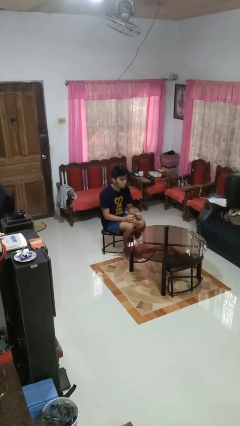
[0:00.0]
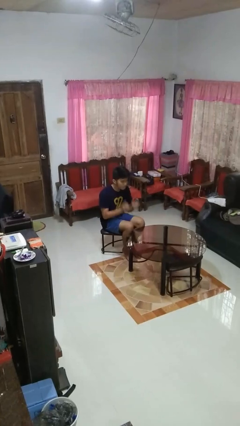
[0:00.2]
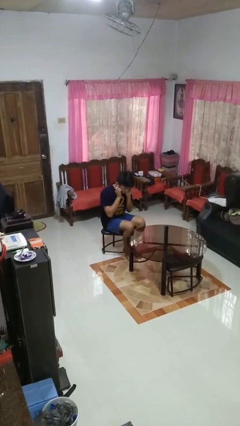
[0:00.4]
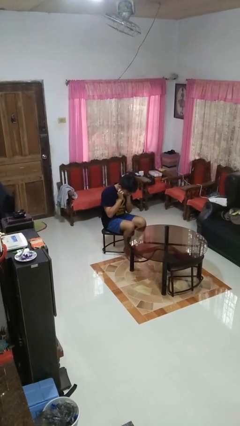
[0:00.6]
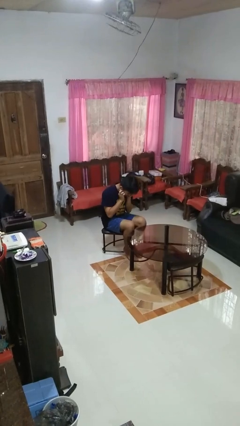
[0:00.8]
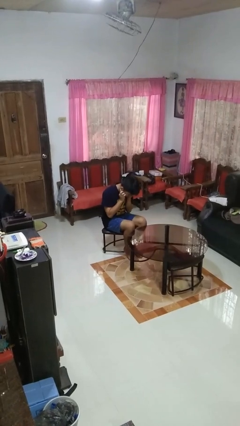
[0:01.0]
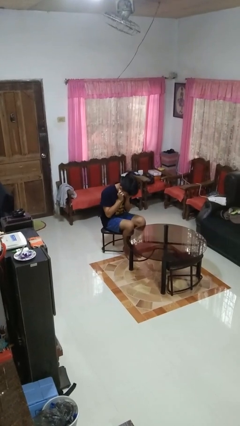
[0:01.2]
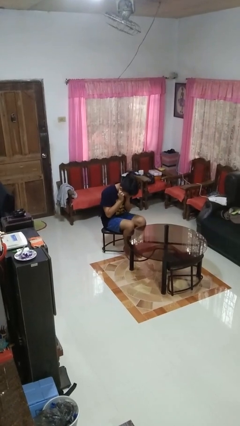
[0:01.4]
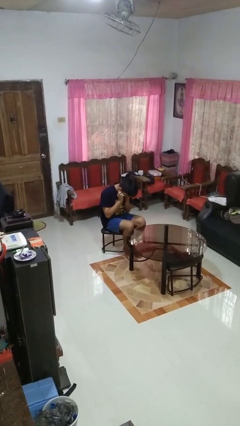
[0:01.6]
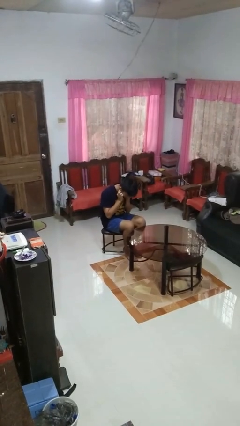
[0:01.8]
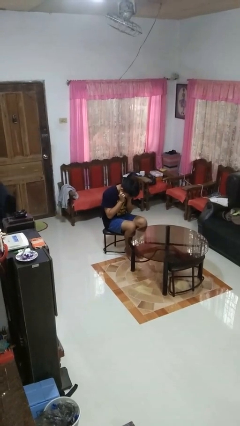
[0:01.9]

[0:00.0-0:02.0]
person puts fingers in ear

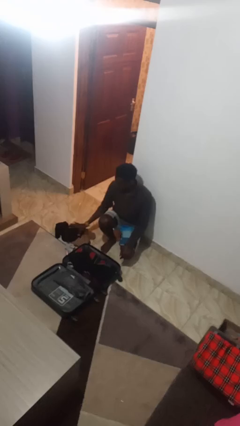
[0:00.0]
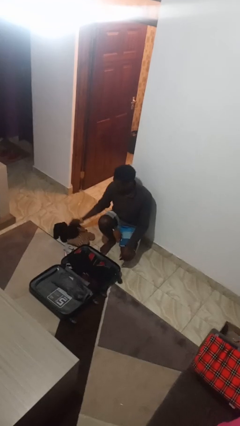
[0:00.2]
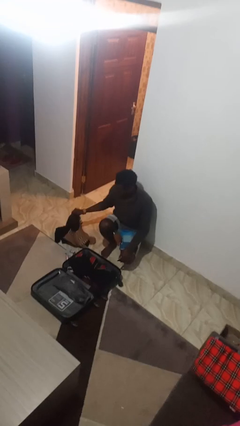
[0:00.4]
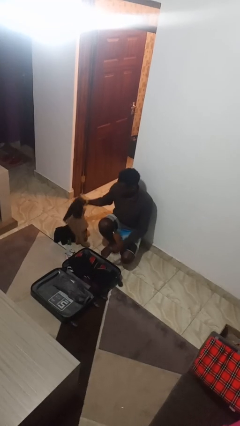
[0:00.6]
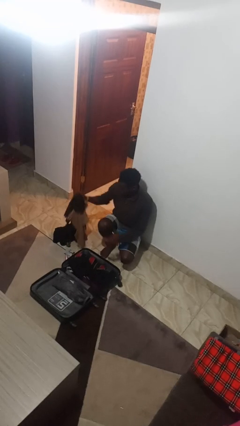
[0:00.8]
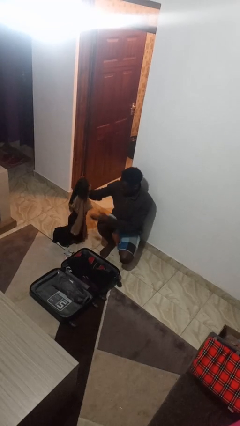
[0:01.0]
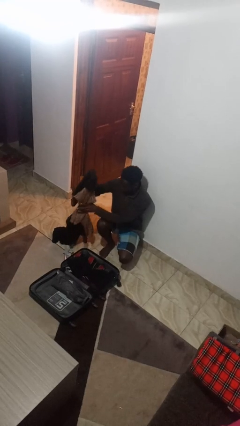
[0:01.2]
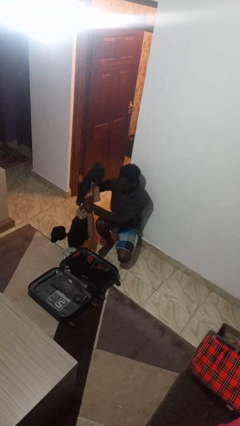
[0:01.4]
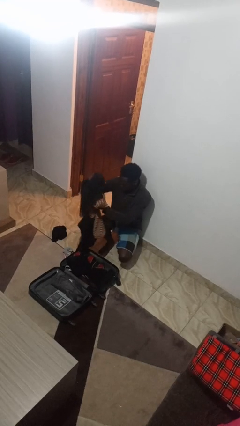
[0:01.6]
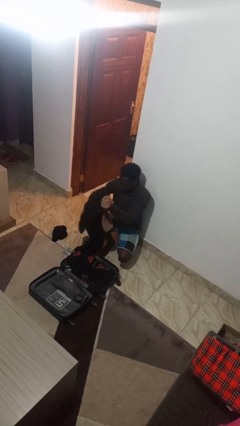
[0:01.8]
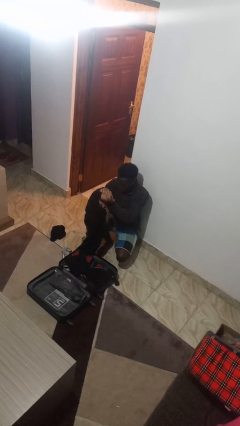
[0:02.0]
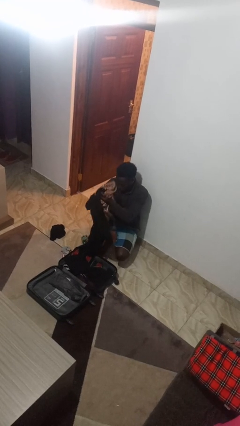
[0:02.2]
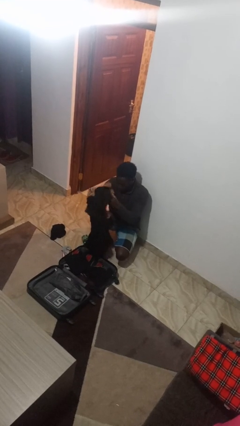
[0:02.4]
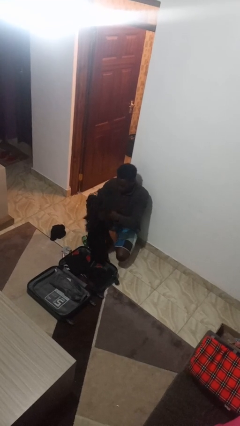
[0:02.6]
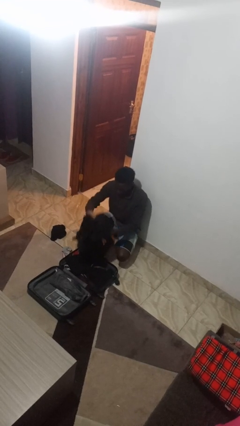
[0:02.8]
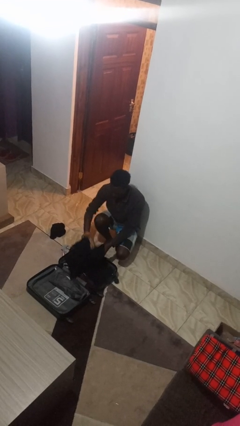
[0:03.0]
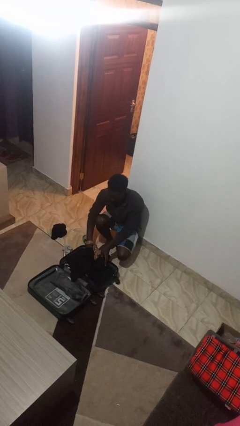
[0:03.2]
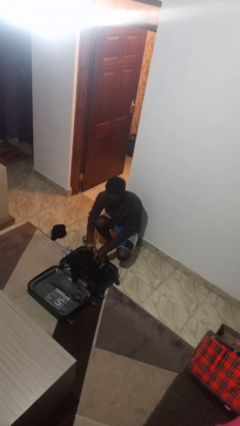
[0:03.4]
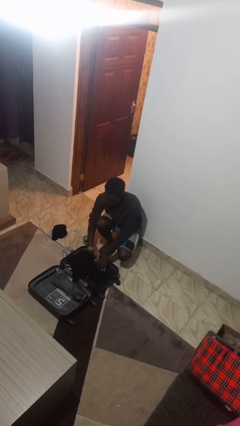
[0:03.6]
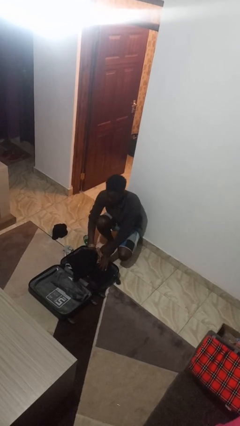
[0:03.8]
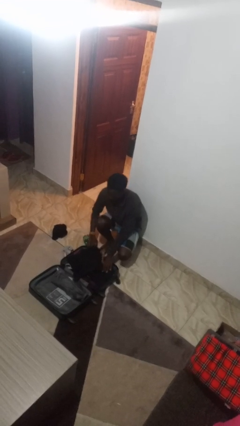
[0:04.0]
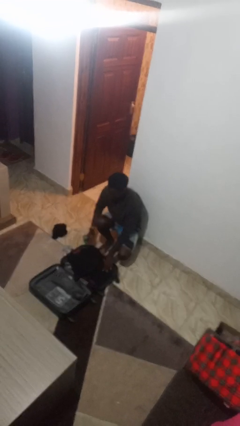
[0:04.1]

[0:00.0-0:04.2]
person loads clothes into suitcase

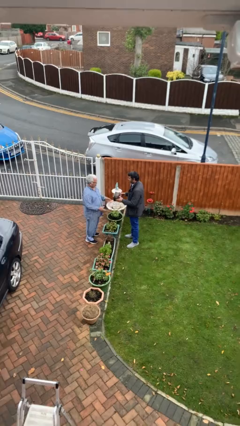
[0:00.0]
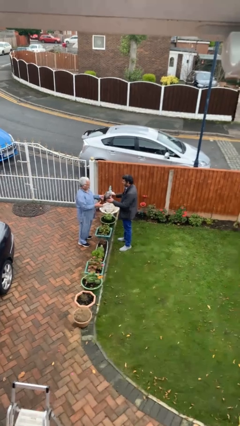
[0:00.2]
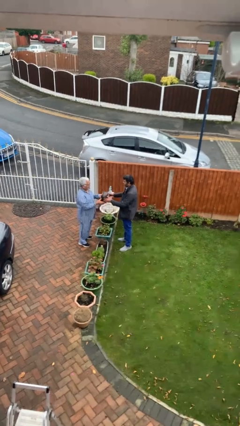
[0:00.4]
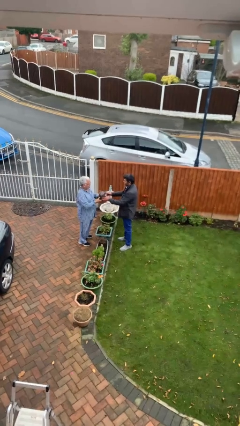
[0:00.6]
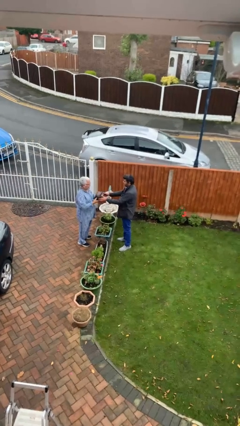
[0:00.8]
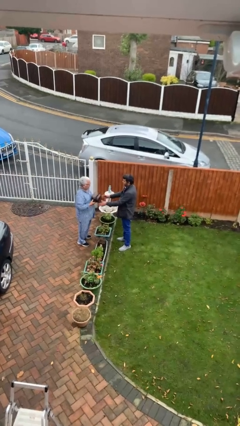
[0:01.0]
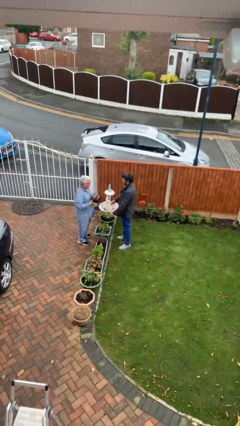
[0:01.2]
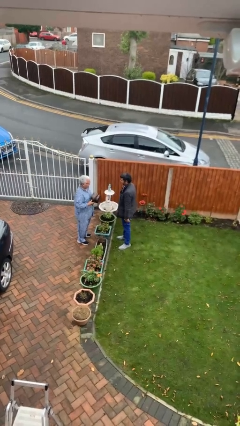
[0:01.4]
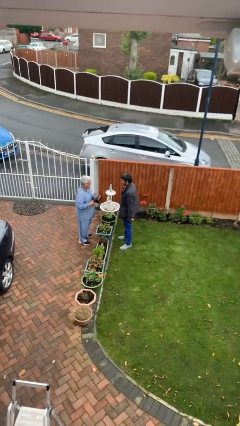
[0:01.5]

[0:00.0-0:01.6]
person transfers object to person

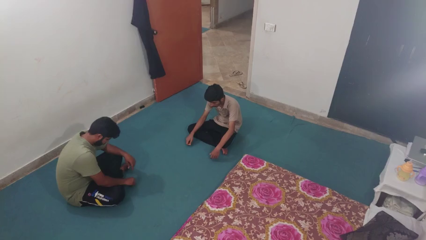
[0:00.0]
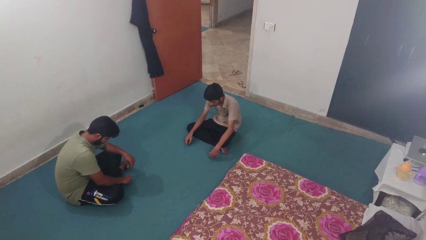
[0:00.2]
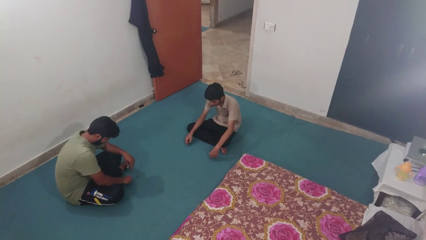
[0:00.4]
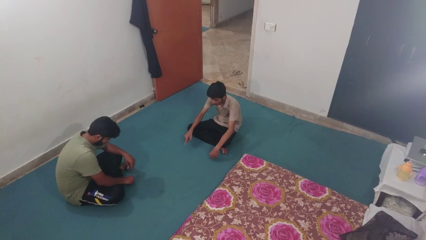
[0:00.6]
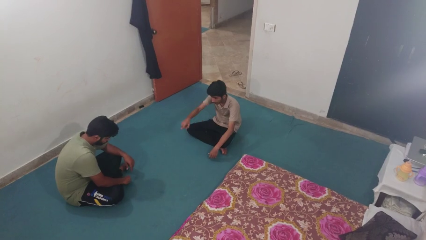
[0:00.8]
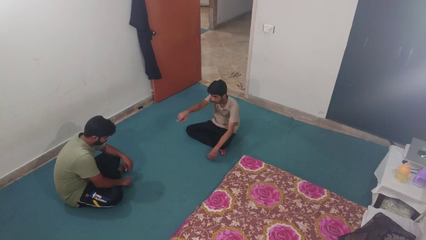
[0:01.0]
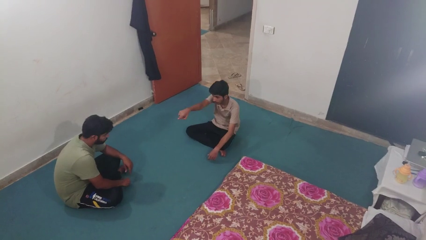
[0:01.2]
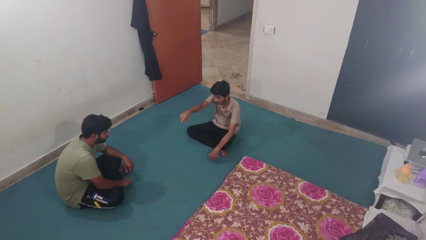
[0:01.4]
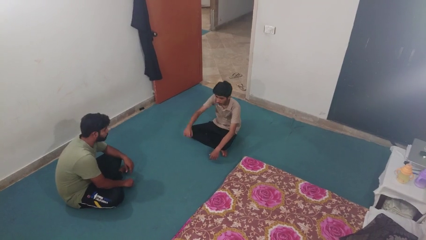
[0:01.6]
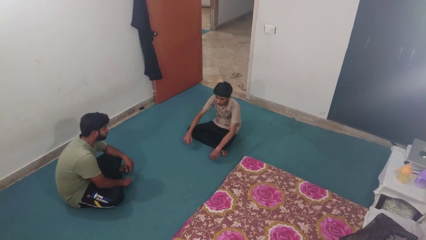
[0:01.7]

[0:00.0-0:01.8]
person points at person

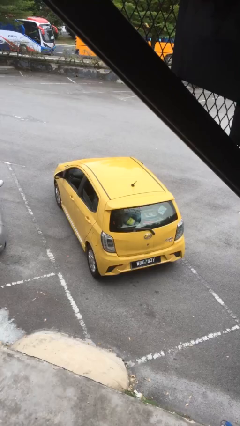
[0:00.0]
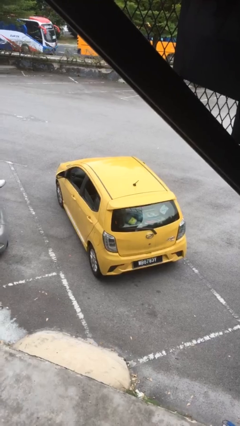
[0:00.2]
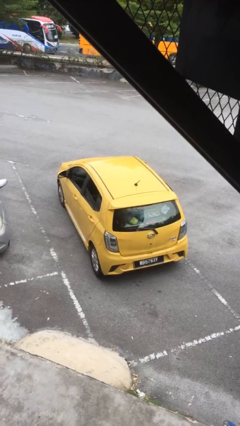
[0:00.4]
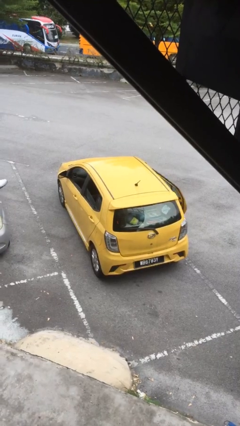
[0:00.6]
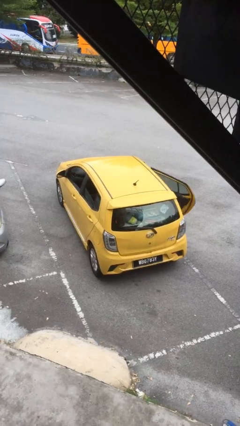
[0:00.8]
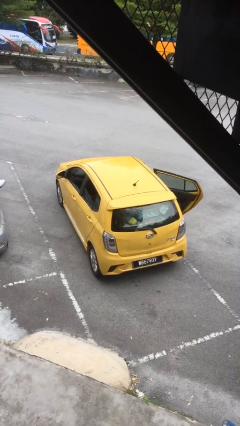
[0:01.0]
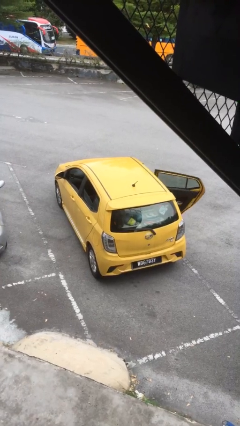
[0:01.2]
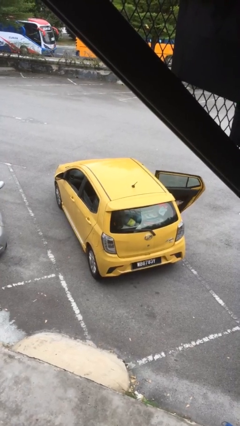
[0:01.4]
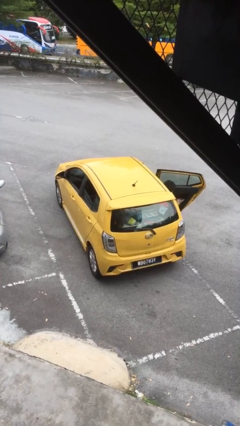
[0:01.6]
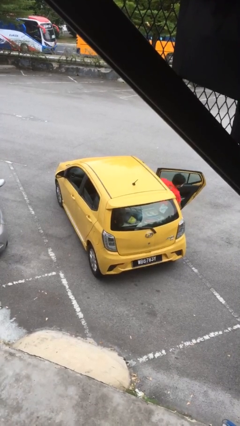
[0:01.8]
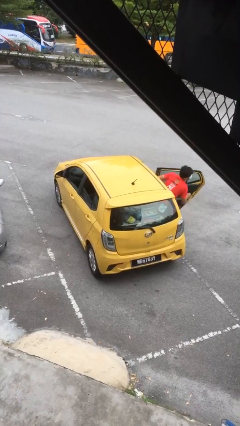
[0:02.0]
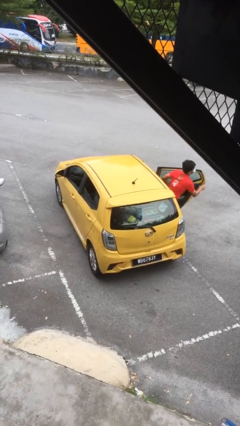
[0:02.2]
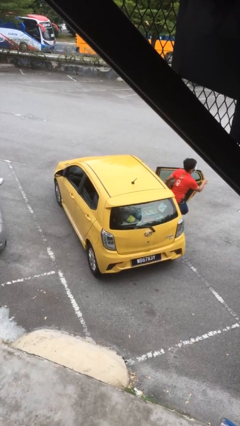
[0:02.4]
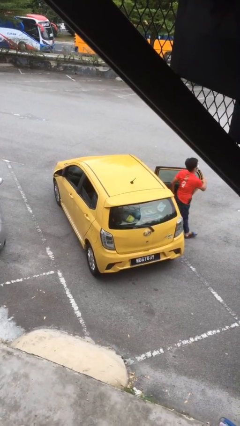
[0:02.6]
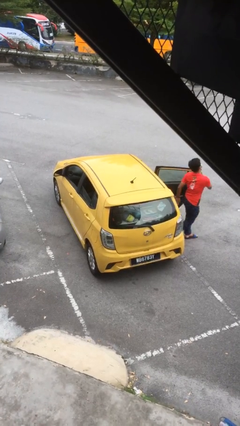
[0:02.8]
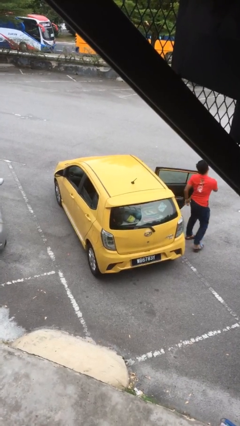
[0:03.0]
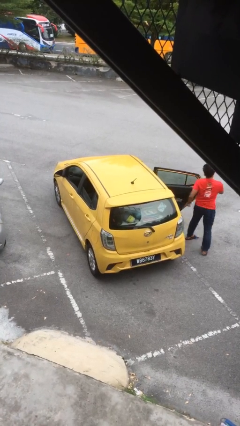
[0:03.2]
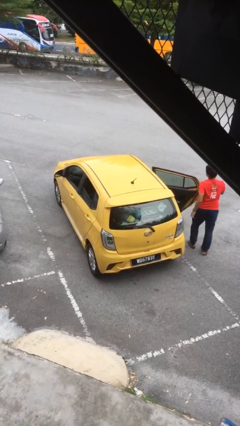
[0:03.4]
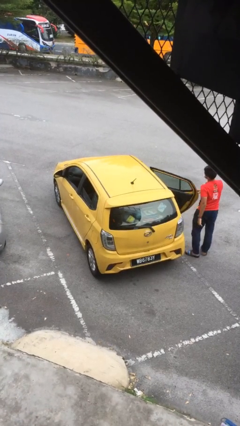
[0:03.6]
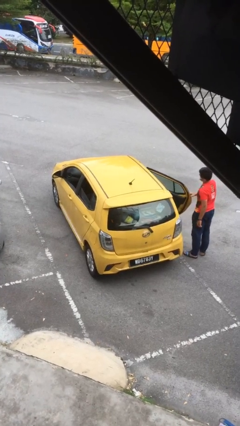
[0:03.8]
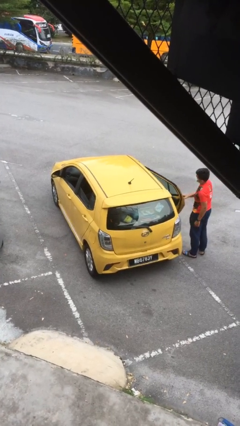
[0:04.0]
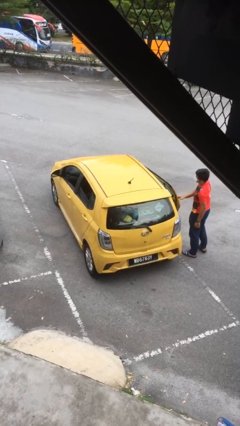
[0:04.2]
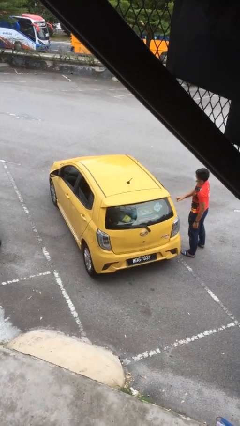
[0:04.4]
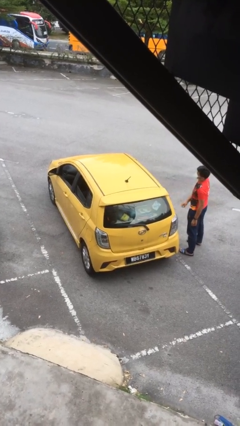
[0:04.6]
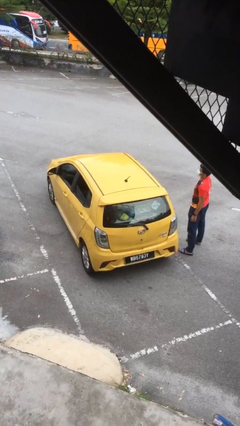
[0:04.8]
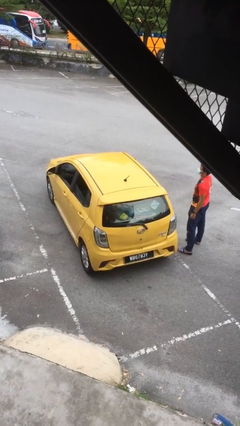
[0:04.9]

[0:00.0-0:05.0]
car drops off person

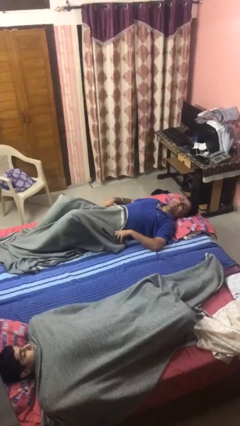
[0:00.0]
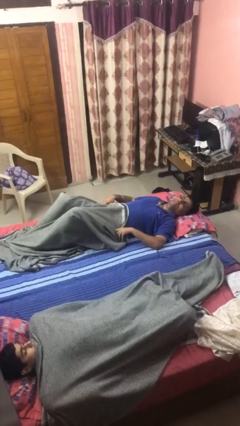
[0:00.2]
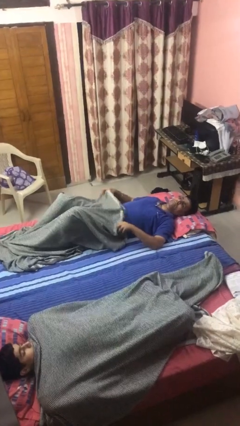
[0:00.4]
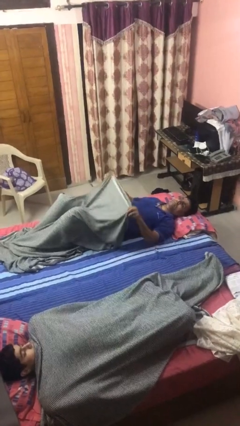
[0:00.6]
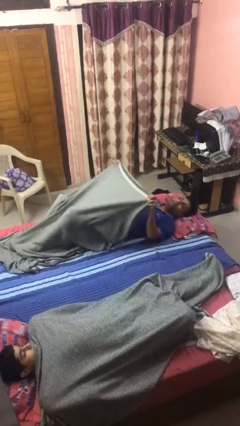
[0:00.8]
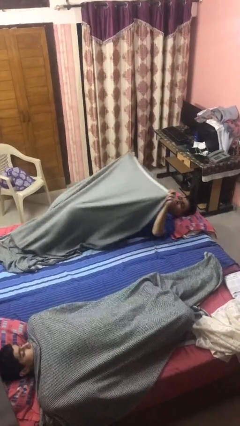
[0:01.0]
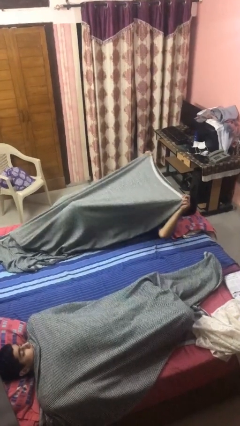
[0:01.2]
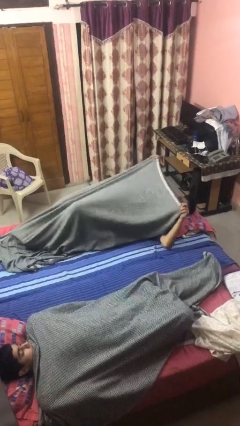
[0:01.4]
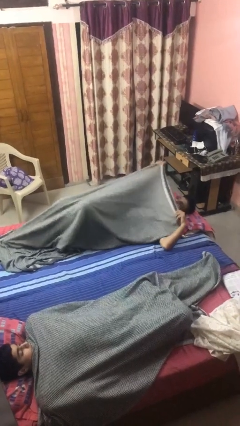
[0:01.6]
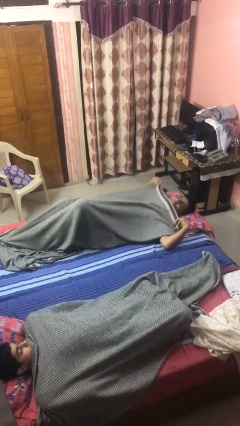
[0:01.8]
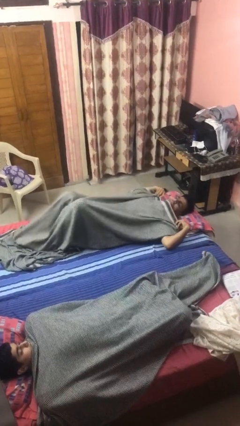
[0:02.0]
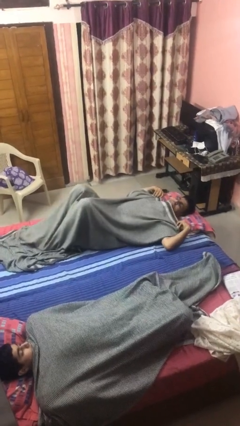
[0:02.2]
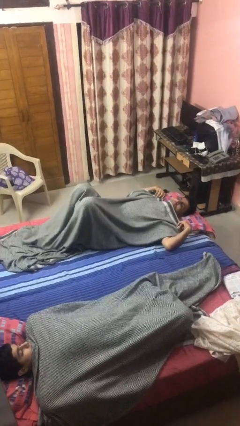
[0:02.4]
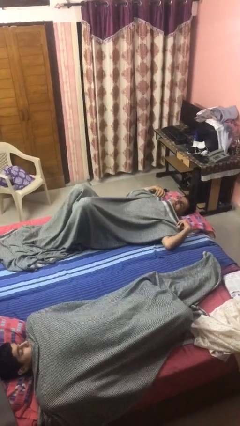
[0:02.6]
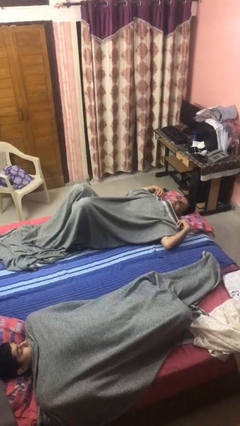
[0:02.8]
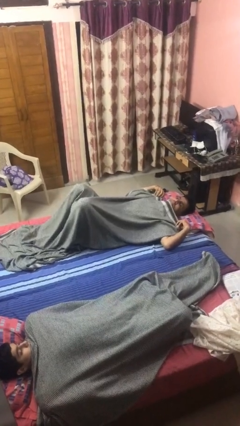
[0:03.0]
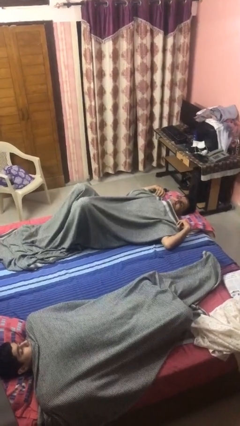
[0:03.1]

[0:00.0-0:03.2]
person covers with bedsheets
